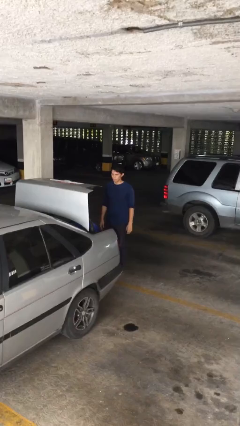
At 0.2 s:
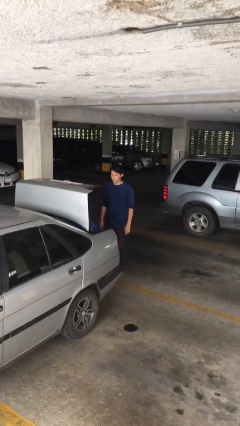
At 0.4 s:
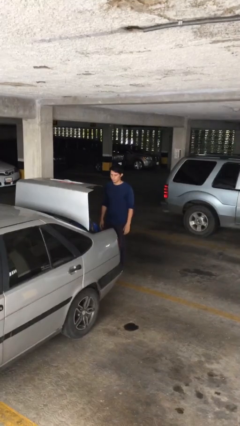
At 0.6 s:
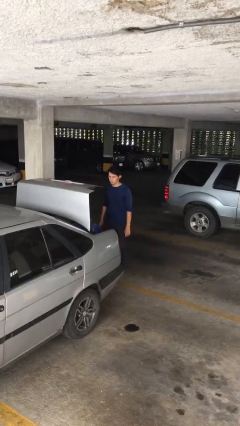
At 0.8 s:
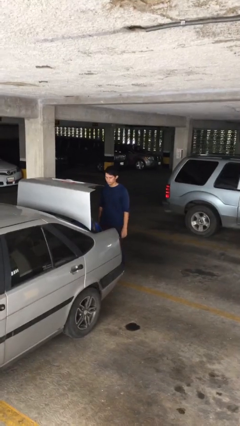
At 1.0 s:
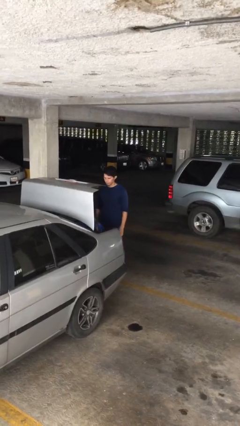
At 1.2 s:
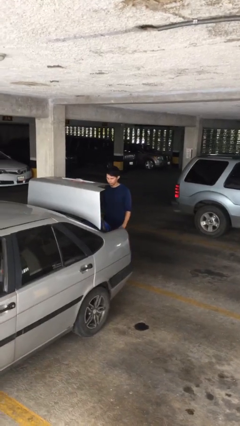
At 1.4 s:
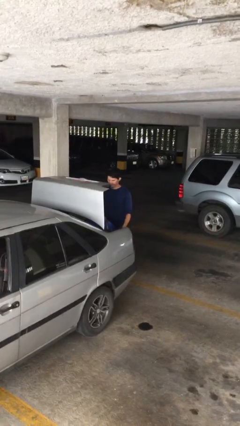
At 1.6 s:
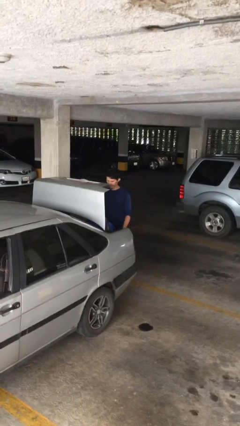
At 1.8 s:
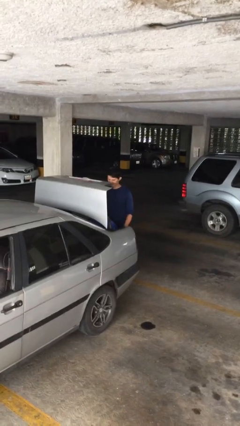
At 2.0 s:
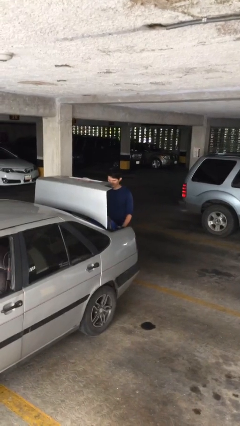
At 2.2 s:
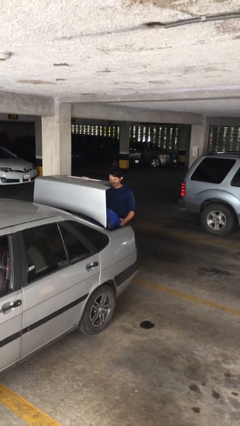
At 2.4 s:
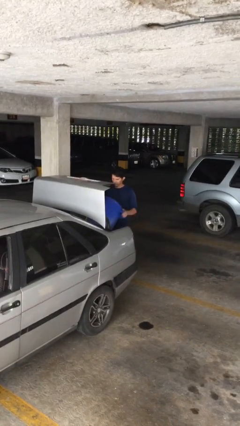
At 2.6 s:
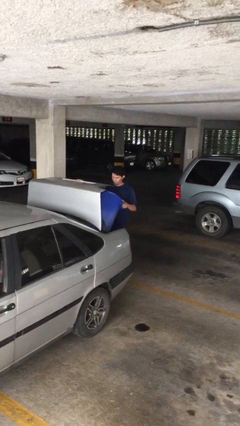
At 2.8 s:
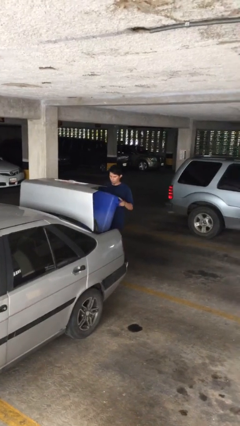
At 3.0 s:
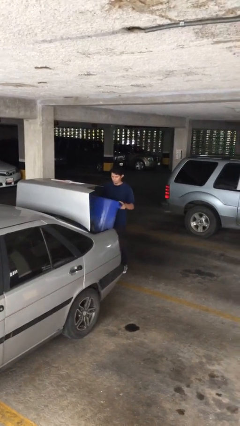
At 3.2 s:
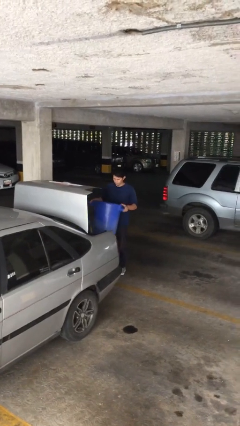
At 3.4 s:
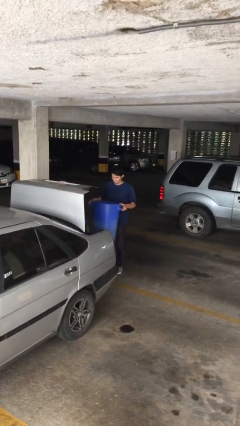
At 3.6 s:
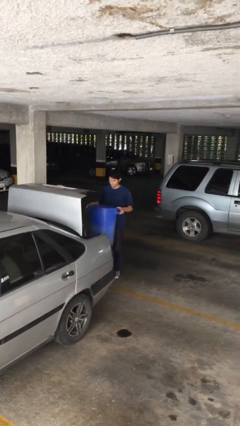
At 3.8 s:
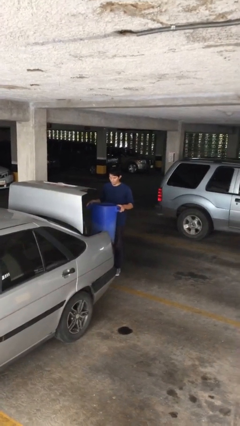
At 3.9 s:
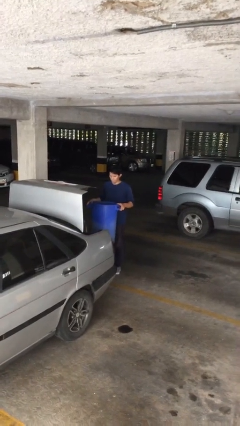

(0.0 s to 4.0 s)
person unloads car

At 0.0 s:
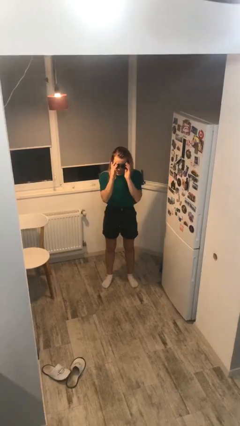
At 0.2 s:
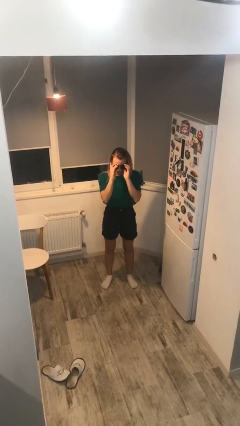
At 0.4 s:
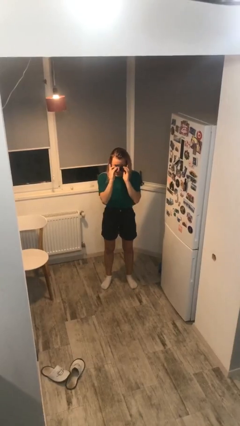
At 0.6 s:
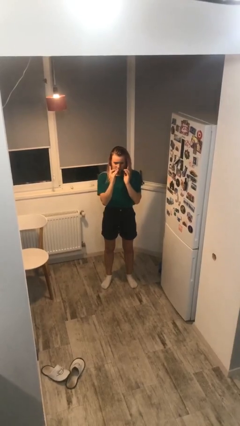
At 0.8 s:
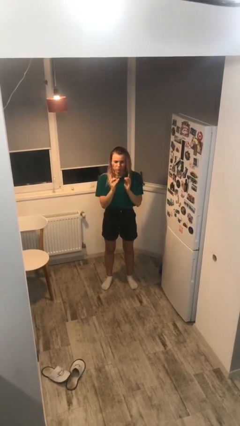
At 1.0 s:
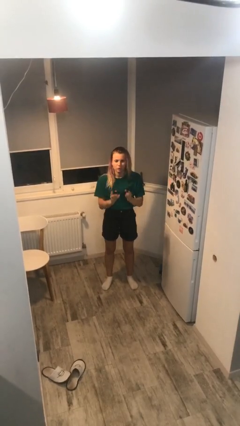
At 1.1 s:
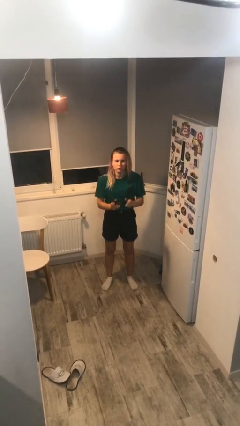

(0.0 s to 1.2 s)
person takes off glasses

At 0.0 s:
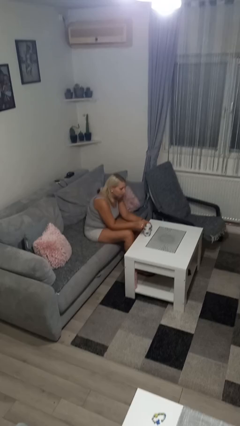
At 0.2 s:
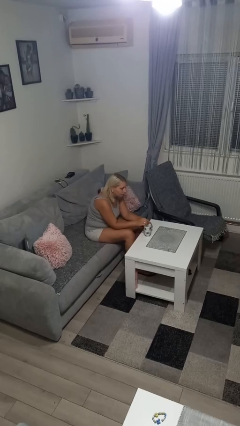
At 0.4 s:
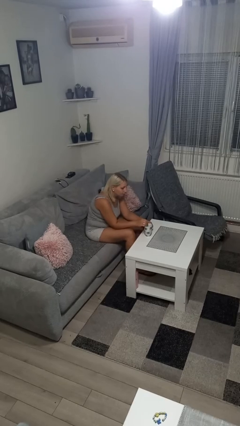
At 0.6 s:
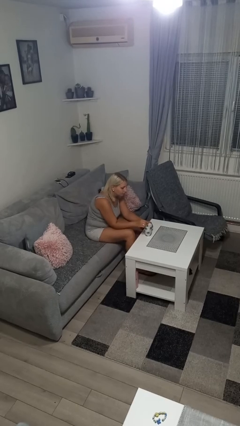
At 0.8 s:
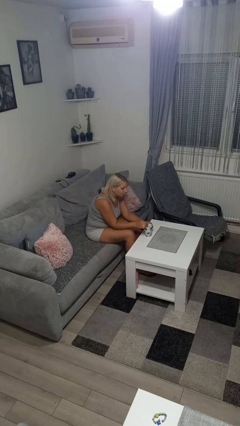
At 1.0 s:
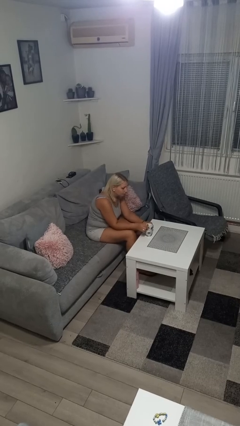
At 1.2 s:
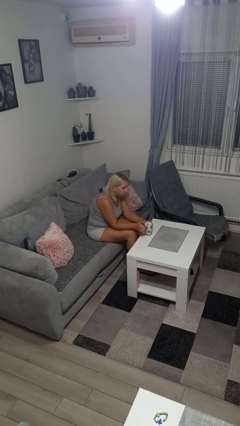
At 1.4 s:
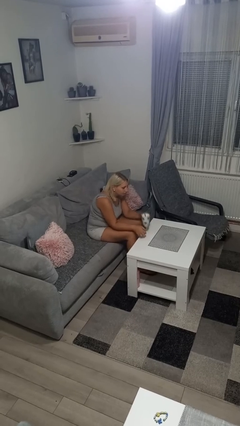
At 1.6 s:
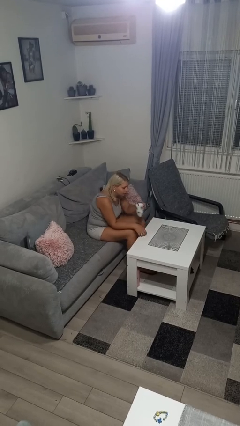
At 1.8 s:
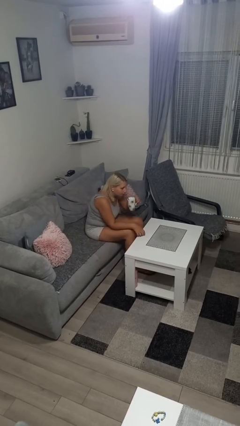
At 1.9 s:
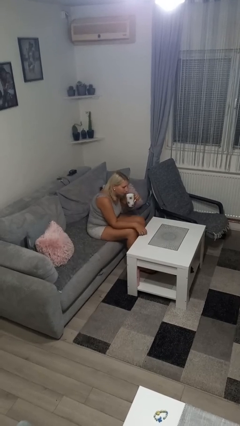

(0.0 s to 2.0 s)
person stirs mug

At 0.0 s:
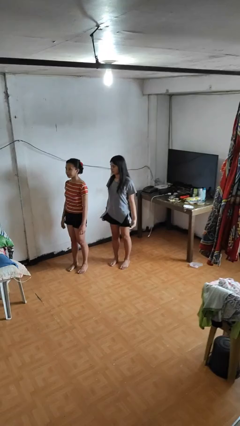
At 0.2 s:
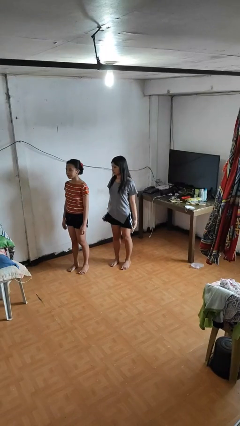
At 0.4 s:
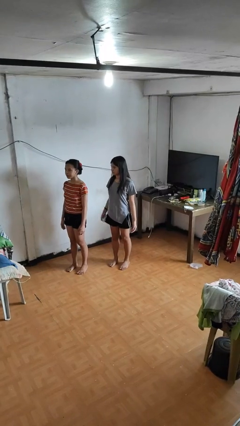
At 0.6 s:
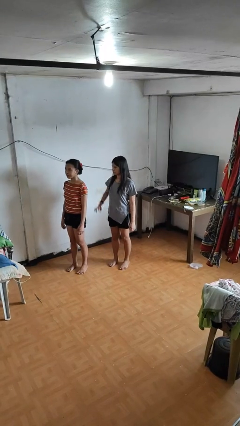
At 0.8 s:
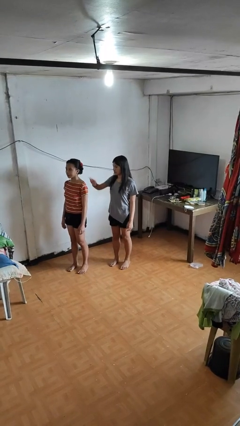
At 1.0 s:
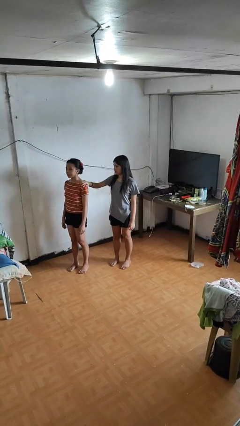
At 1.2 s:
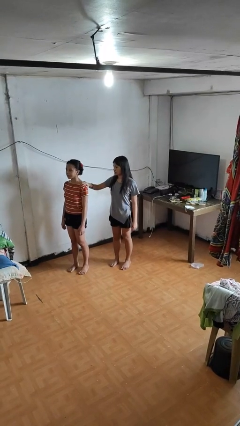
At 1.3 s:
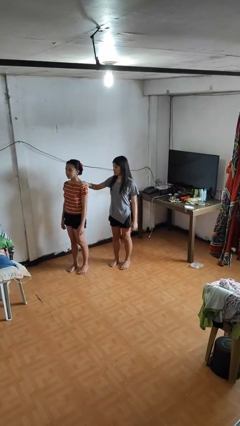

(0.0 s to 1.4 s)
person grabs person by shoulder

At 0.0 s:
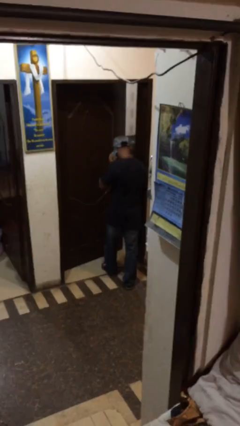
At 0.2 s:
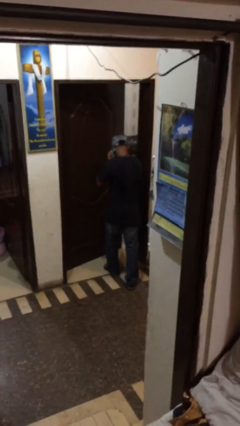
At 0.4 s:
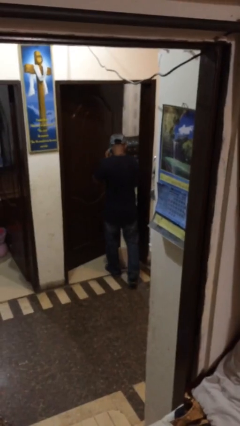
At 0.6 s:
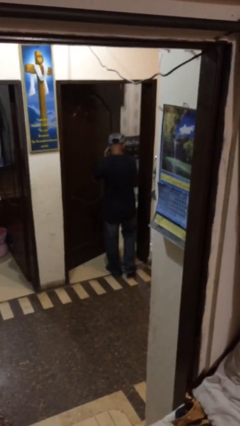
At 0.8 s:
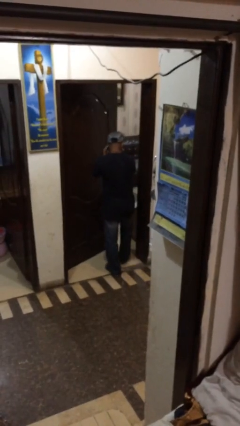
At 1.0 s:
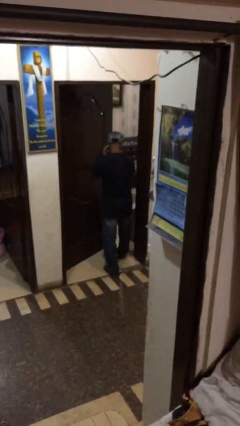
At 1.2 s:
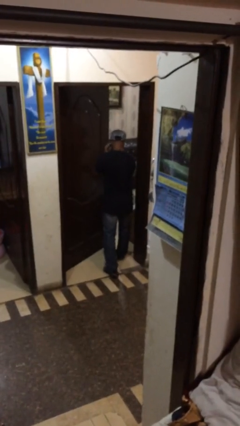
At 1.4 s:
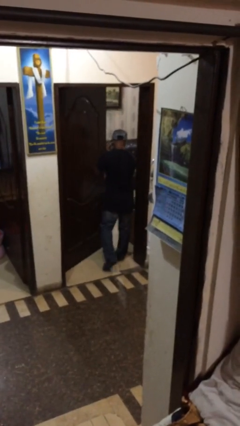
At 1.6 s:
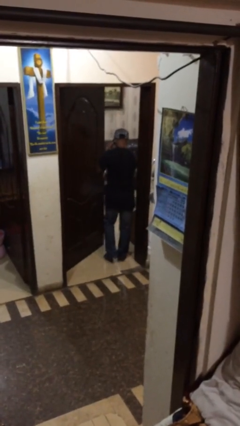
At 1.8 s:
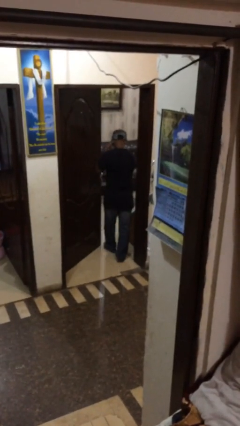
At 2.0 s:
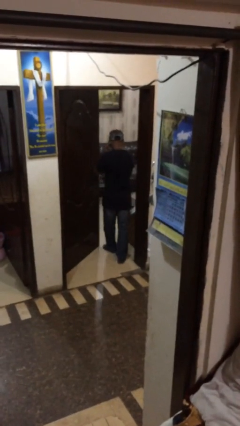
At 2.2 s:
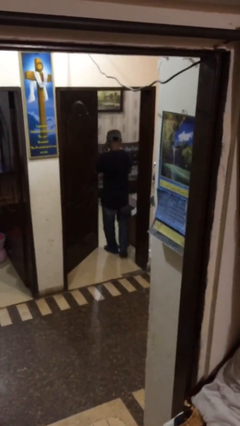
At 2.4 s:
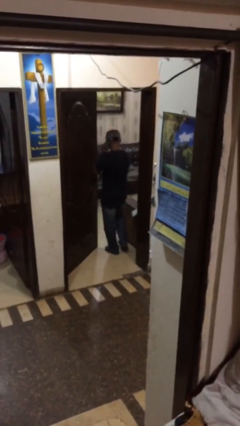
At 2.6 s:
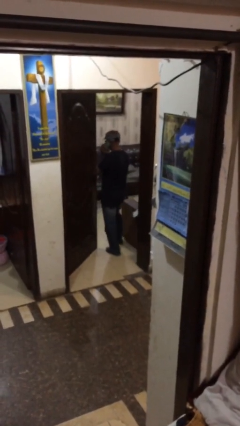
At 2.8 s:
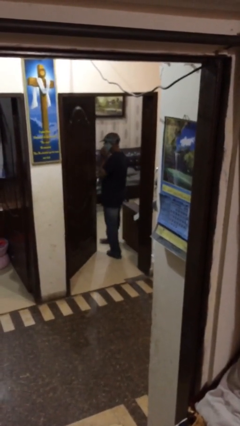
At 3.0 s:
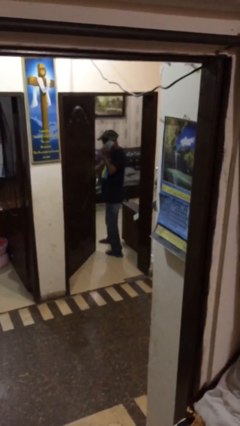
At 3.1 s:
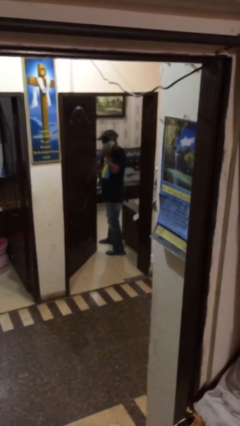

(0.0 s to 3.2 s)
person exits scene through structure

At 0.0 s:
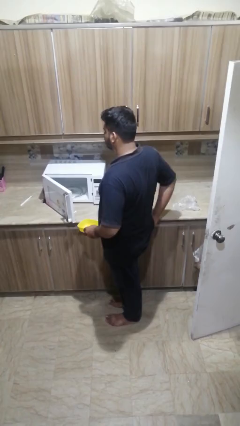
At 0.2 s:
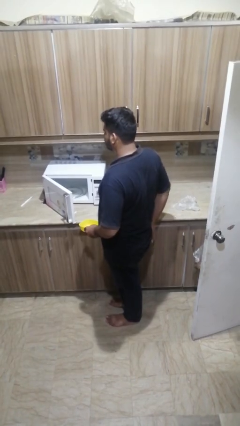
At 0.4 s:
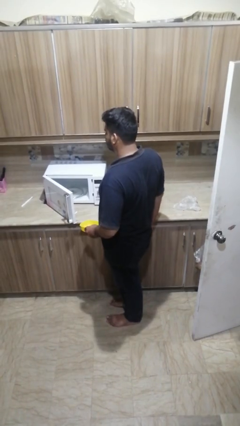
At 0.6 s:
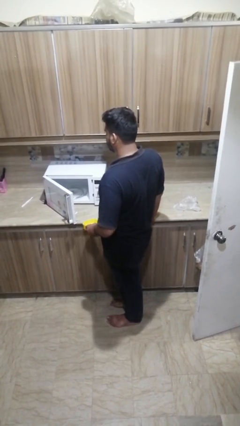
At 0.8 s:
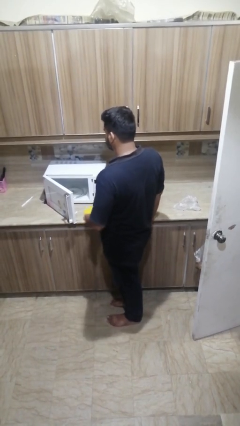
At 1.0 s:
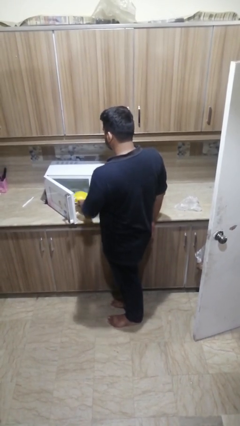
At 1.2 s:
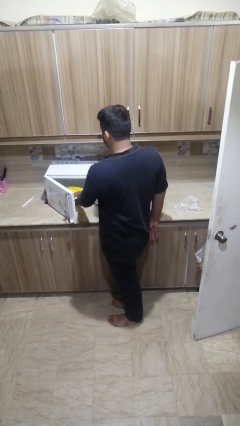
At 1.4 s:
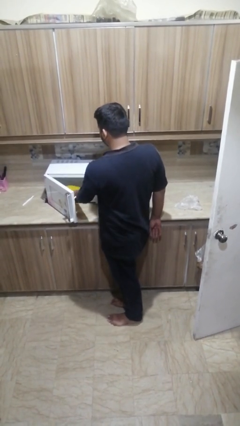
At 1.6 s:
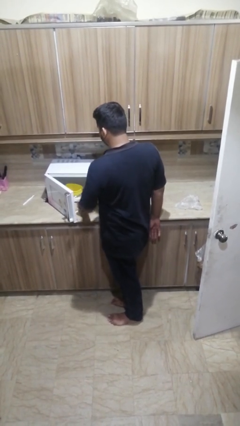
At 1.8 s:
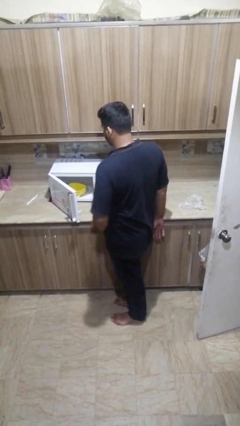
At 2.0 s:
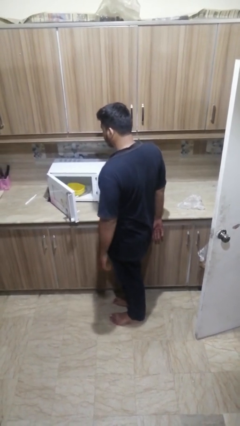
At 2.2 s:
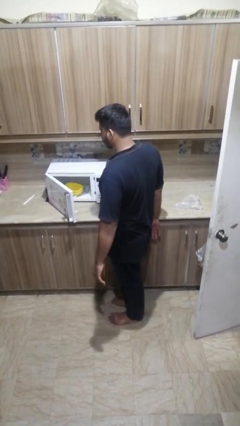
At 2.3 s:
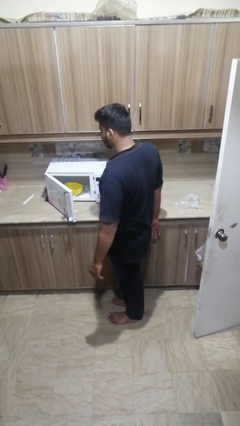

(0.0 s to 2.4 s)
person puts object into microwave

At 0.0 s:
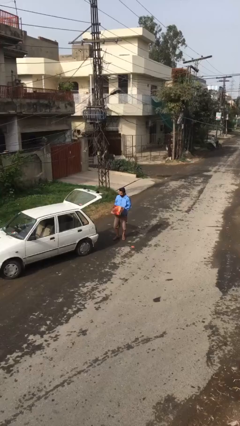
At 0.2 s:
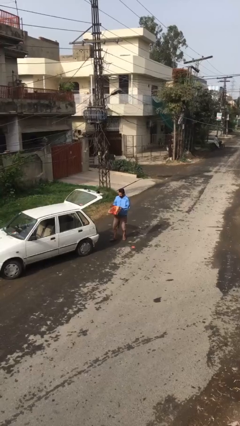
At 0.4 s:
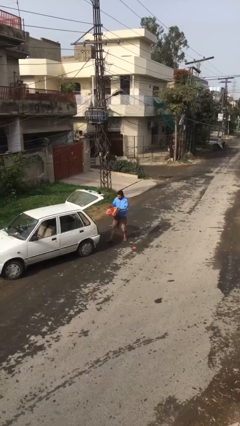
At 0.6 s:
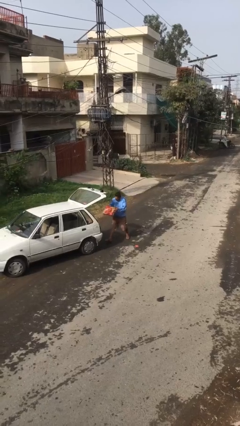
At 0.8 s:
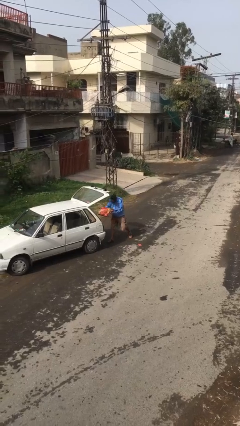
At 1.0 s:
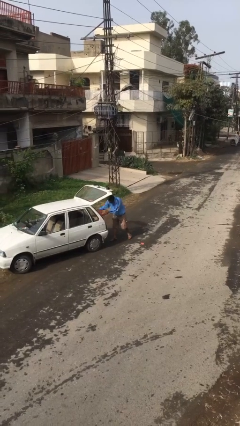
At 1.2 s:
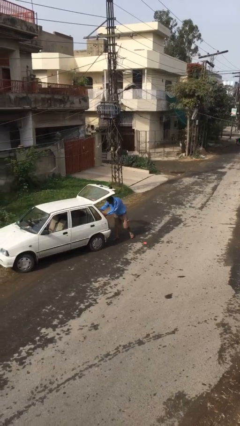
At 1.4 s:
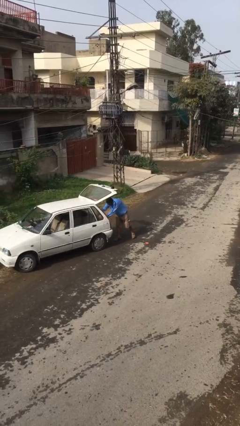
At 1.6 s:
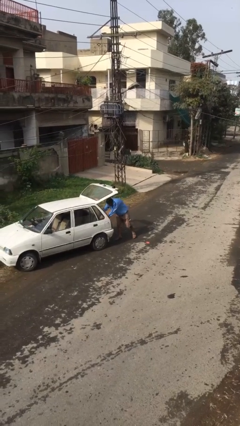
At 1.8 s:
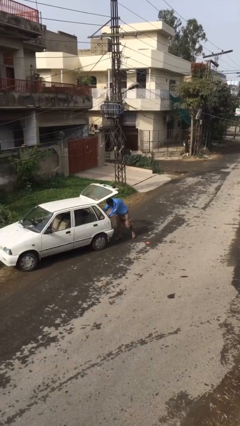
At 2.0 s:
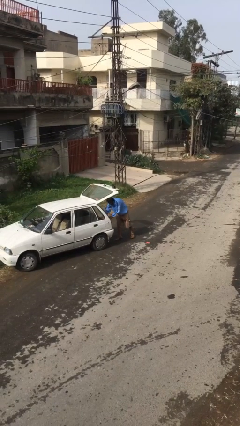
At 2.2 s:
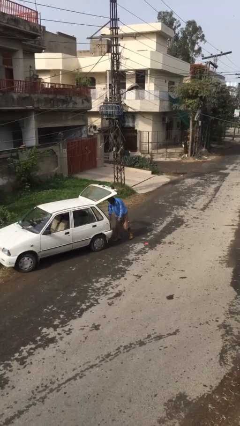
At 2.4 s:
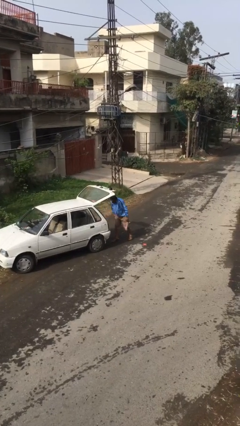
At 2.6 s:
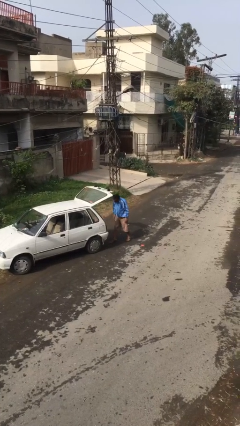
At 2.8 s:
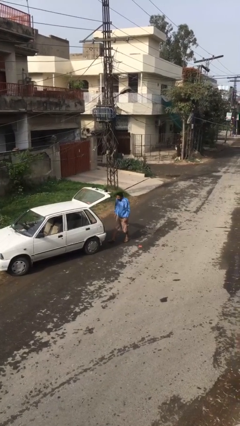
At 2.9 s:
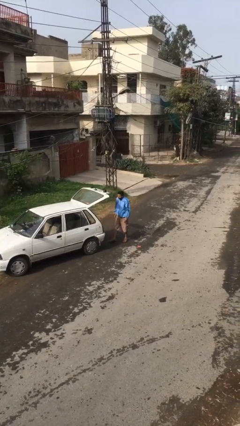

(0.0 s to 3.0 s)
person loads car
